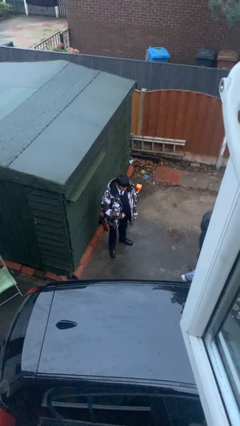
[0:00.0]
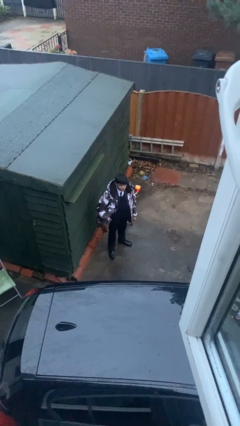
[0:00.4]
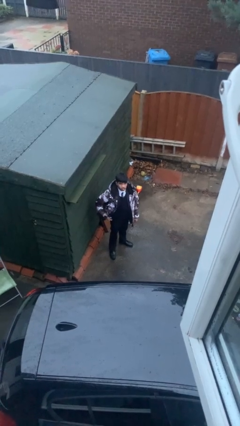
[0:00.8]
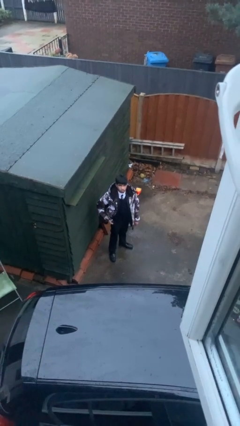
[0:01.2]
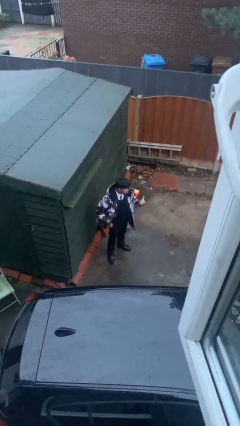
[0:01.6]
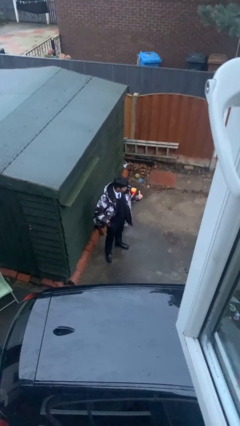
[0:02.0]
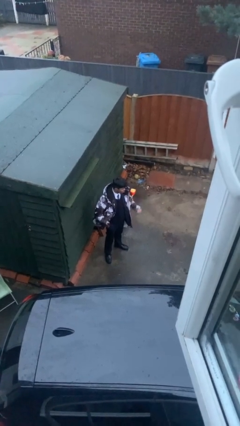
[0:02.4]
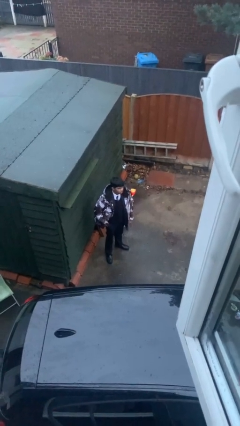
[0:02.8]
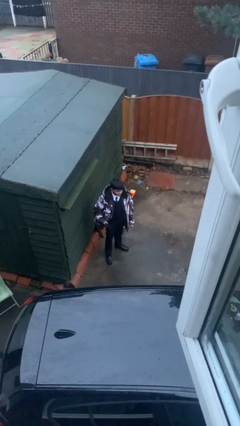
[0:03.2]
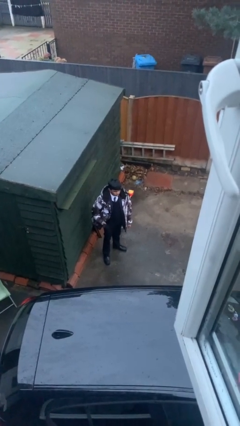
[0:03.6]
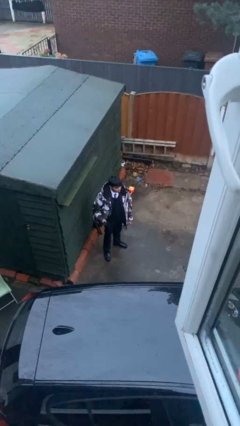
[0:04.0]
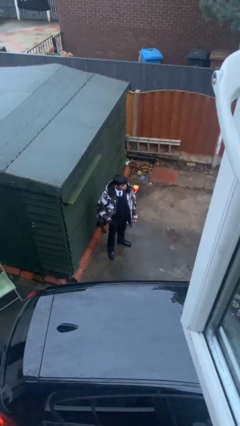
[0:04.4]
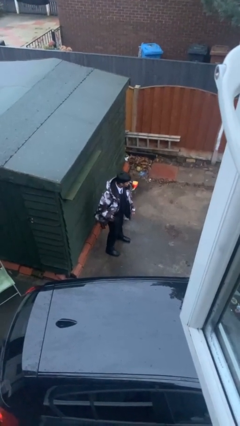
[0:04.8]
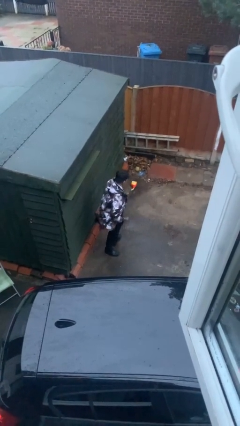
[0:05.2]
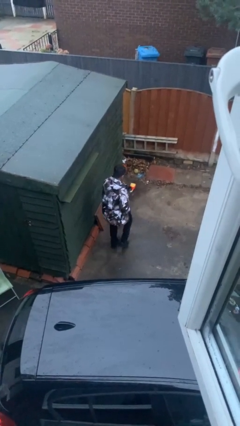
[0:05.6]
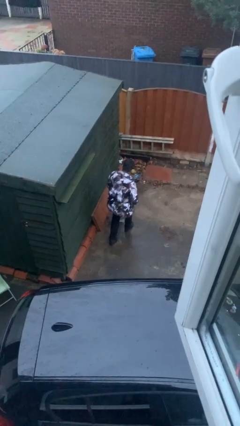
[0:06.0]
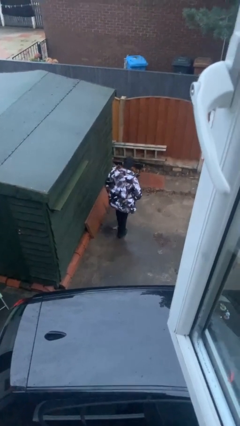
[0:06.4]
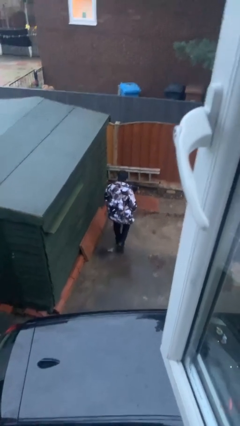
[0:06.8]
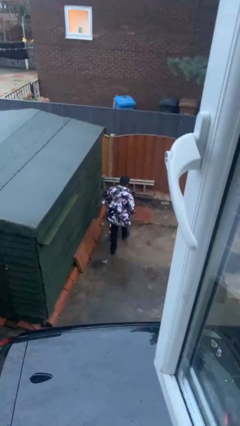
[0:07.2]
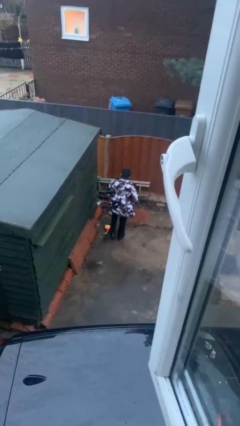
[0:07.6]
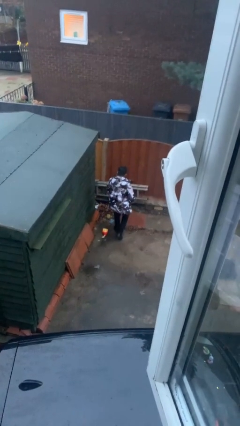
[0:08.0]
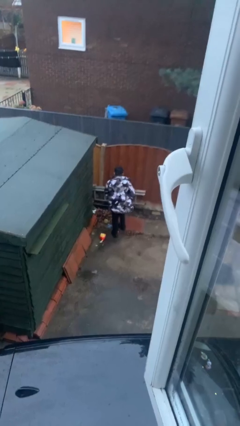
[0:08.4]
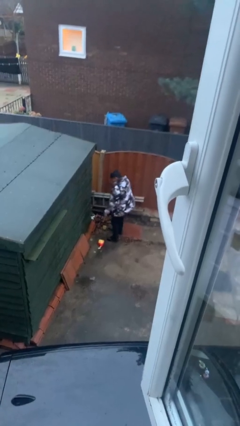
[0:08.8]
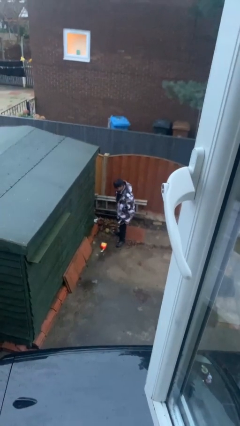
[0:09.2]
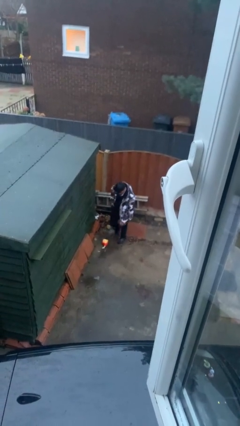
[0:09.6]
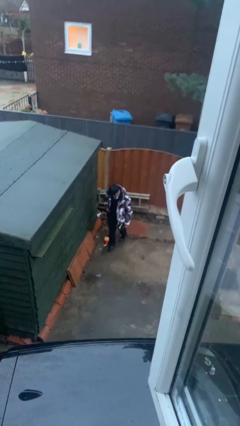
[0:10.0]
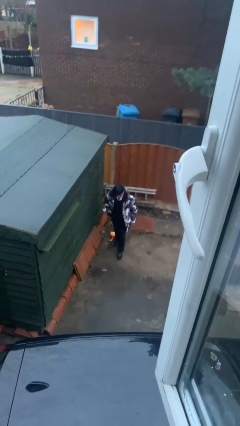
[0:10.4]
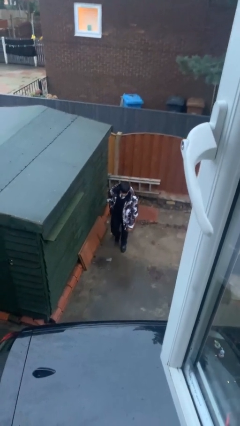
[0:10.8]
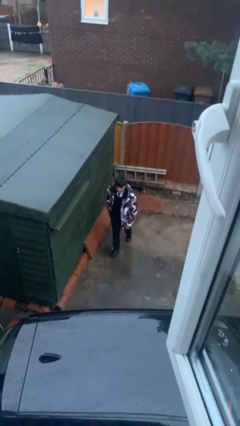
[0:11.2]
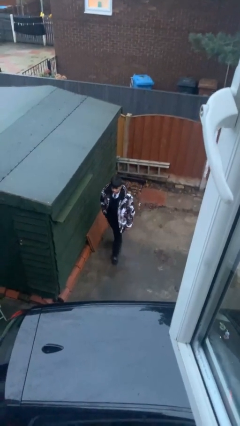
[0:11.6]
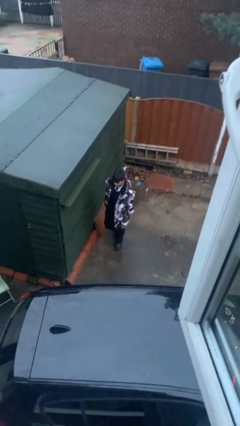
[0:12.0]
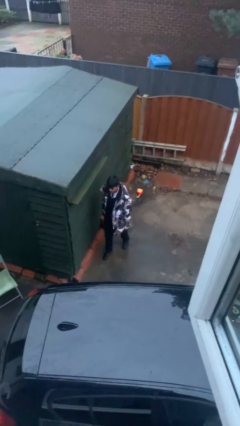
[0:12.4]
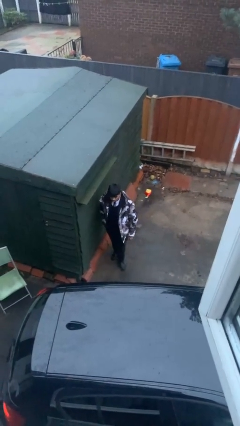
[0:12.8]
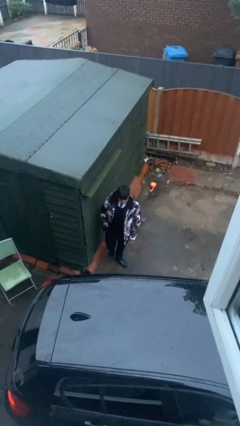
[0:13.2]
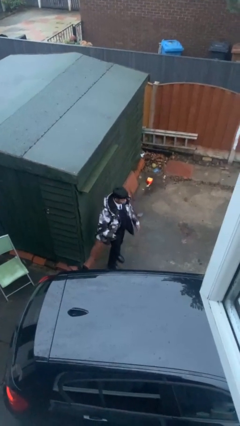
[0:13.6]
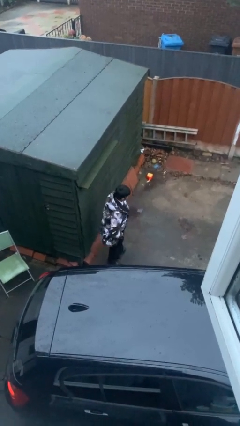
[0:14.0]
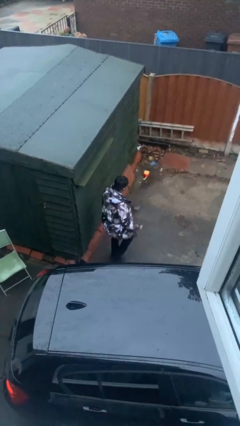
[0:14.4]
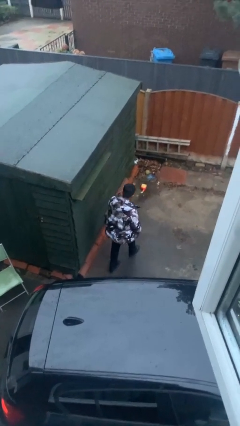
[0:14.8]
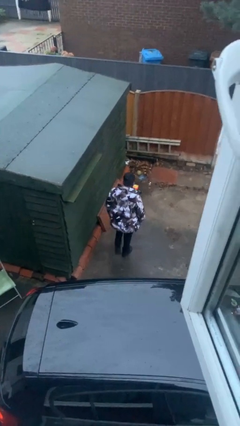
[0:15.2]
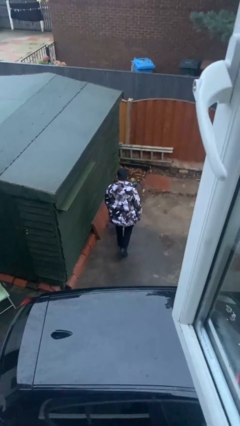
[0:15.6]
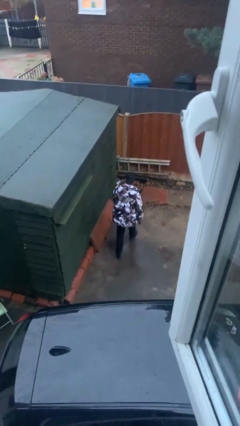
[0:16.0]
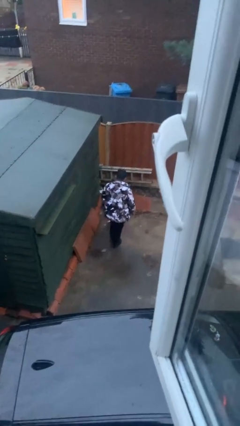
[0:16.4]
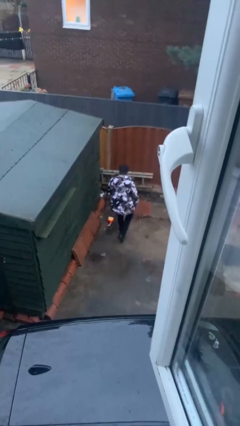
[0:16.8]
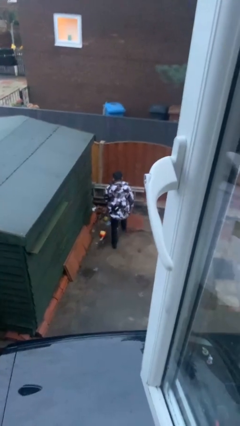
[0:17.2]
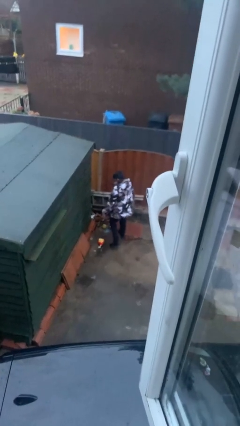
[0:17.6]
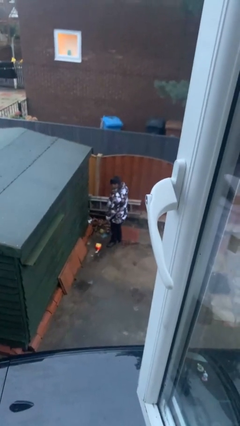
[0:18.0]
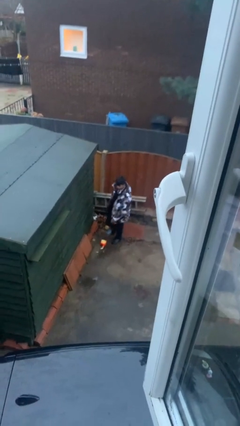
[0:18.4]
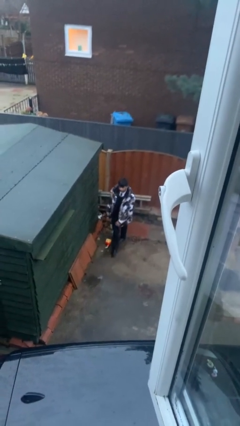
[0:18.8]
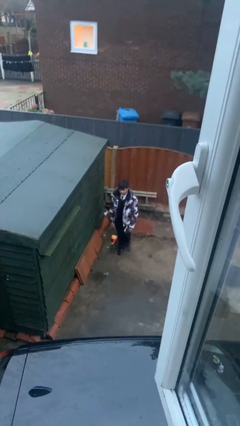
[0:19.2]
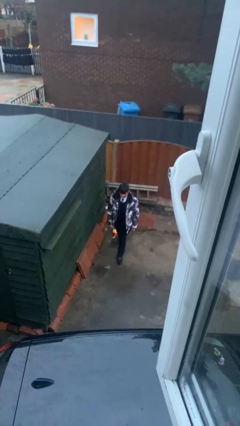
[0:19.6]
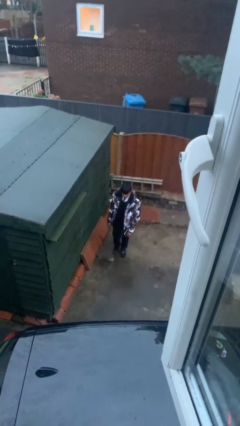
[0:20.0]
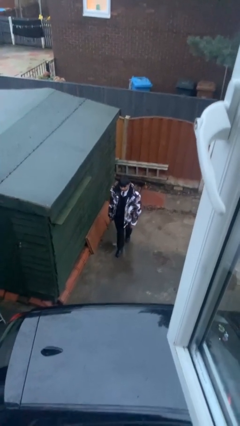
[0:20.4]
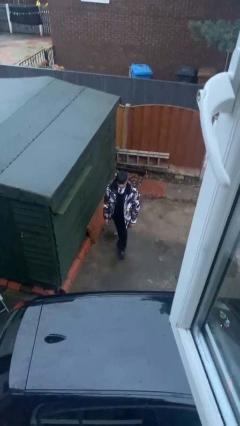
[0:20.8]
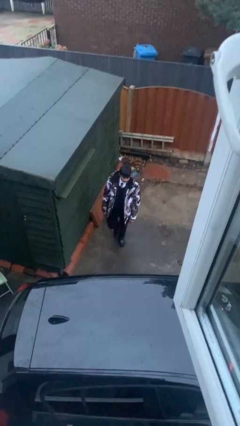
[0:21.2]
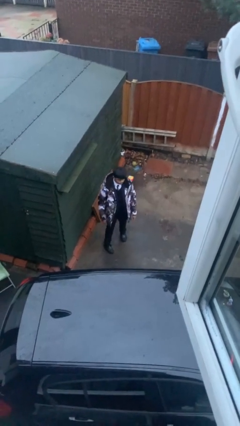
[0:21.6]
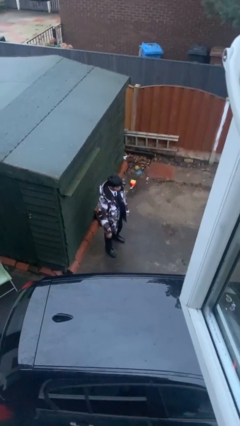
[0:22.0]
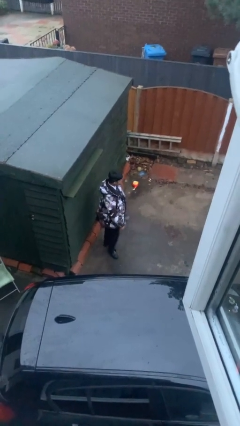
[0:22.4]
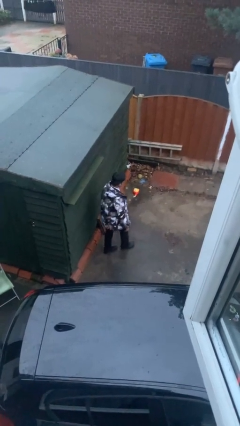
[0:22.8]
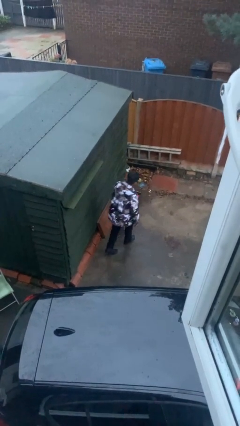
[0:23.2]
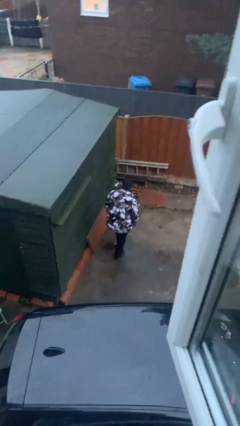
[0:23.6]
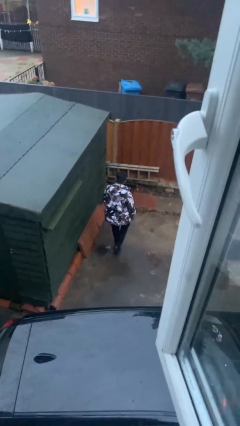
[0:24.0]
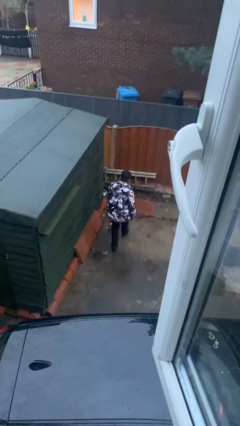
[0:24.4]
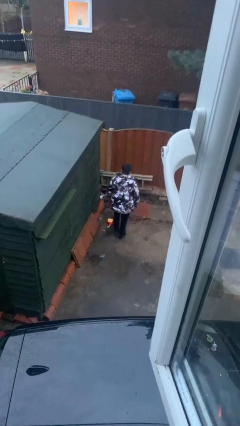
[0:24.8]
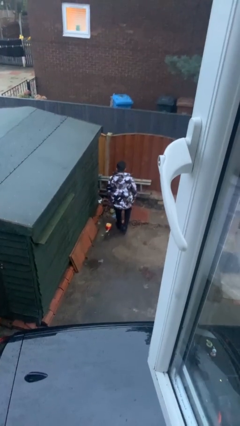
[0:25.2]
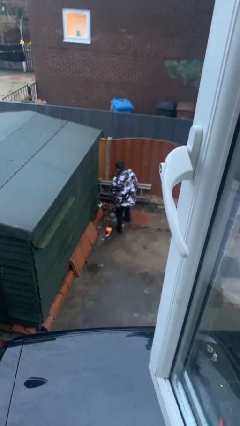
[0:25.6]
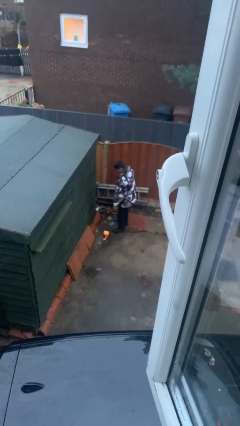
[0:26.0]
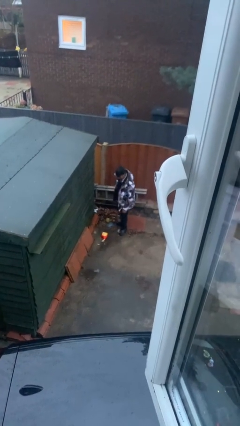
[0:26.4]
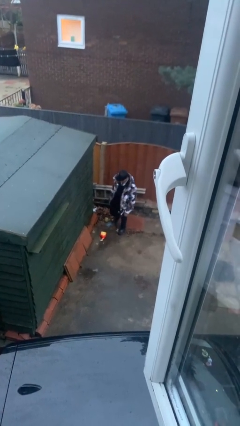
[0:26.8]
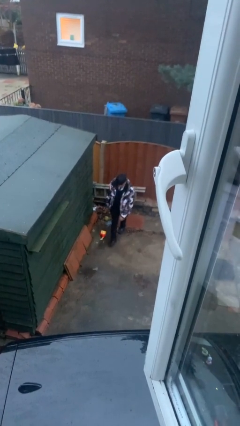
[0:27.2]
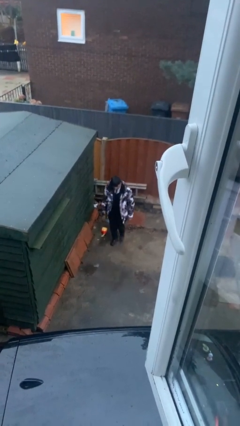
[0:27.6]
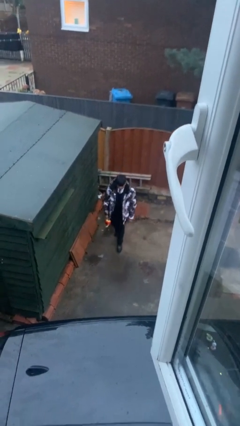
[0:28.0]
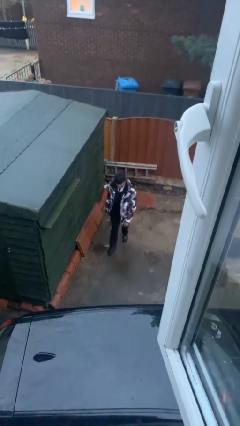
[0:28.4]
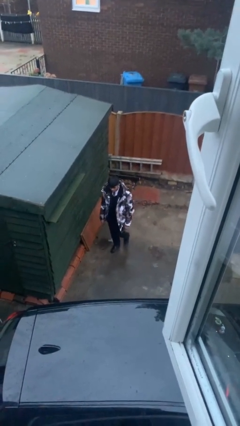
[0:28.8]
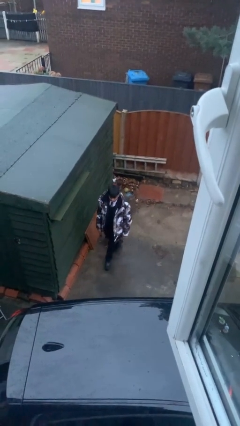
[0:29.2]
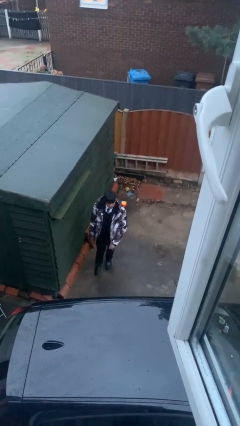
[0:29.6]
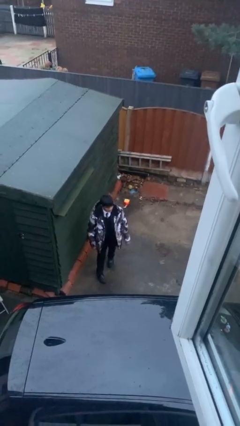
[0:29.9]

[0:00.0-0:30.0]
person walks

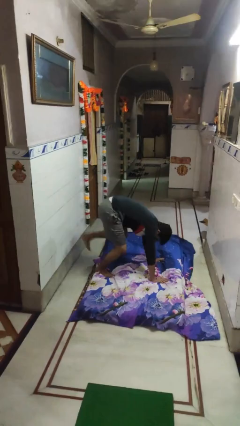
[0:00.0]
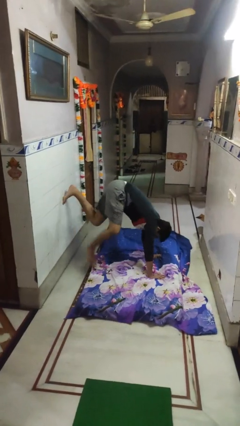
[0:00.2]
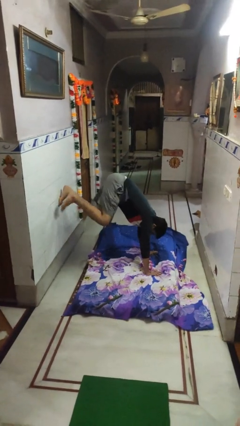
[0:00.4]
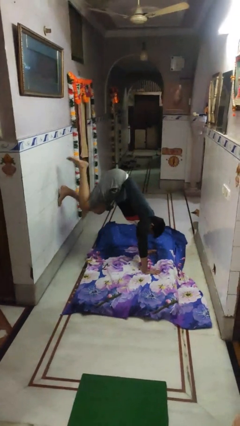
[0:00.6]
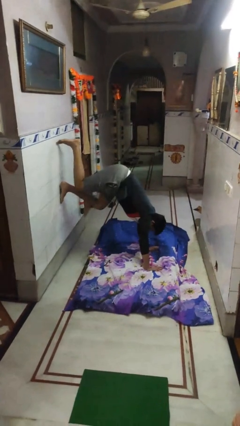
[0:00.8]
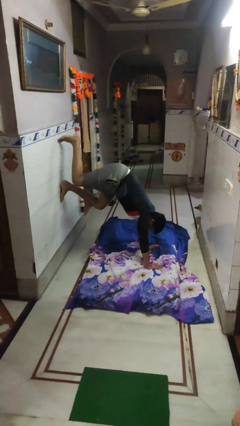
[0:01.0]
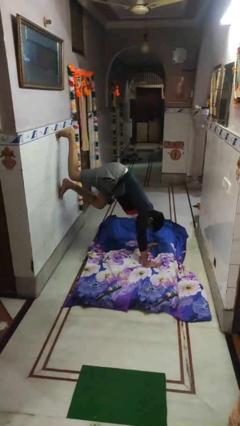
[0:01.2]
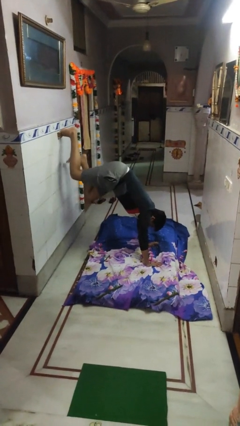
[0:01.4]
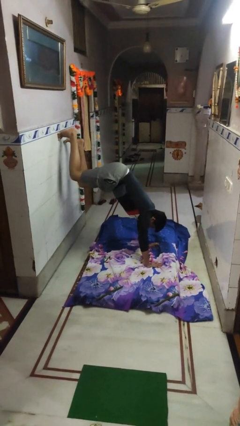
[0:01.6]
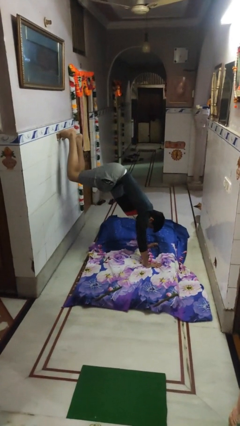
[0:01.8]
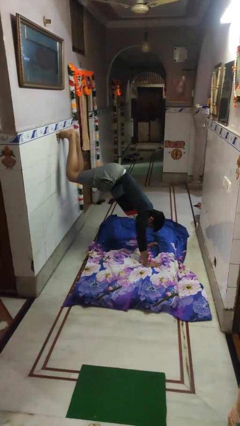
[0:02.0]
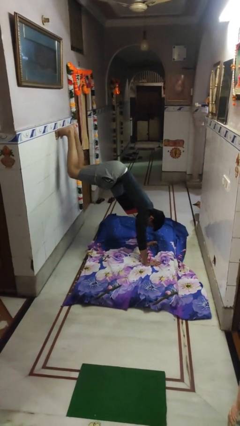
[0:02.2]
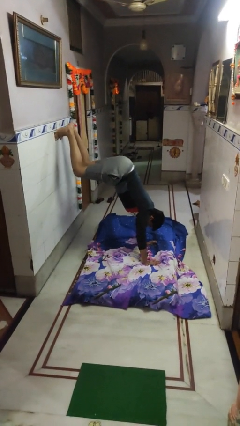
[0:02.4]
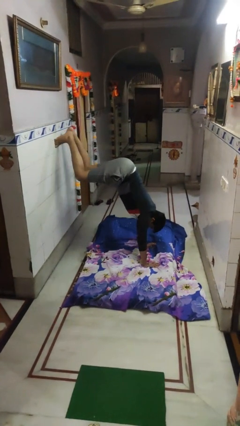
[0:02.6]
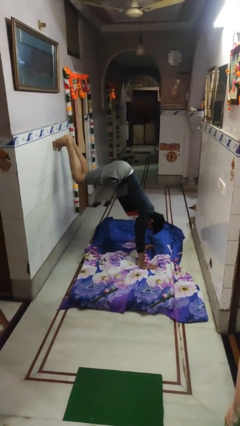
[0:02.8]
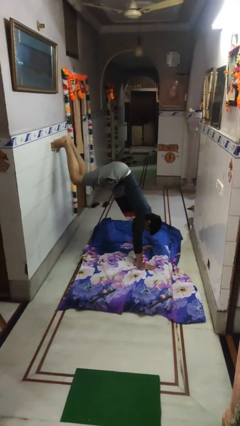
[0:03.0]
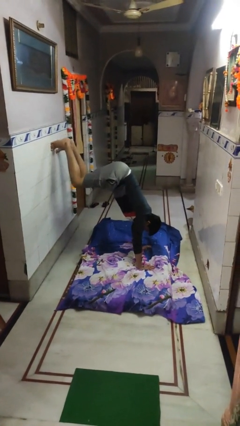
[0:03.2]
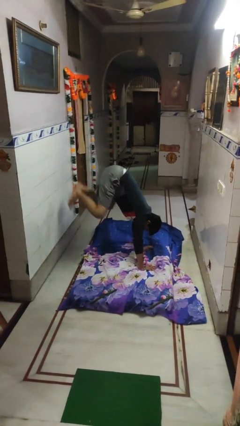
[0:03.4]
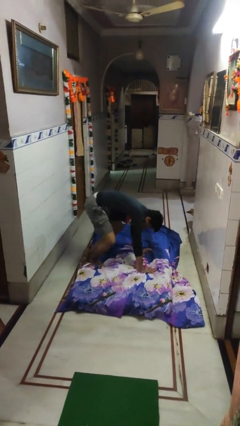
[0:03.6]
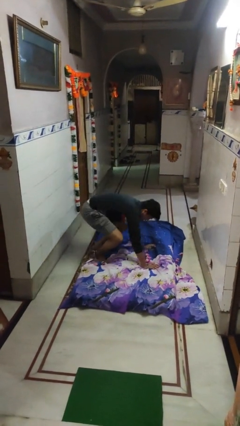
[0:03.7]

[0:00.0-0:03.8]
person handstand
